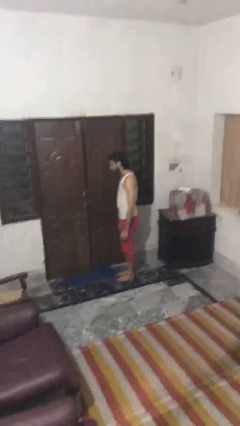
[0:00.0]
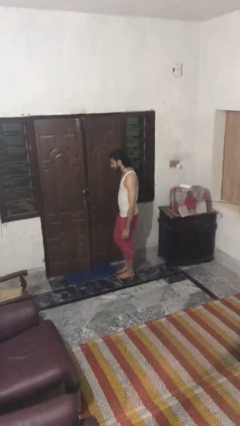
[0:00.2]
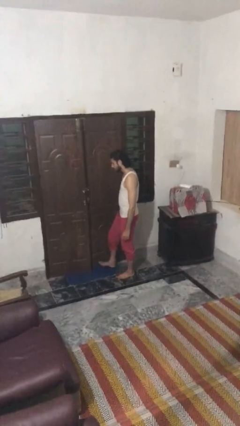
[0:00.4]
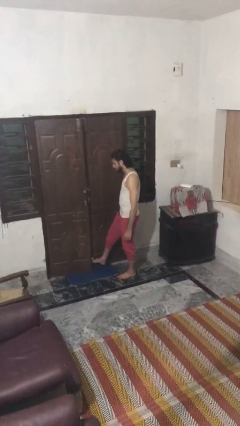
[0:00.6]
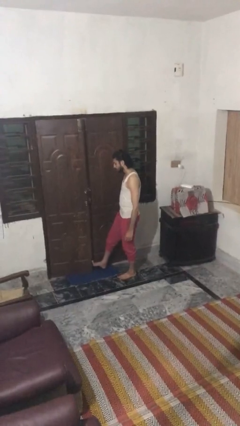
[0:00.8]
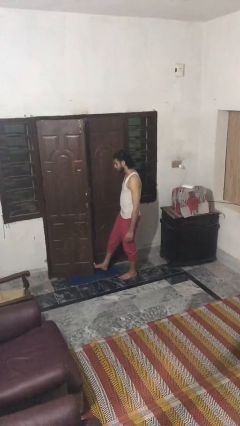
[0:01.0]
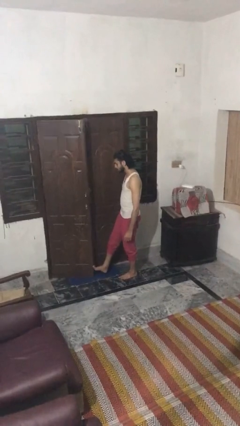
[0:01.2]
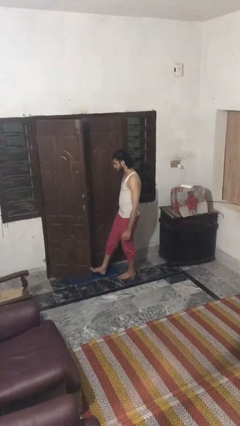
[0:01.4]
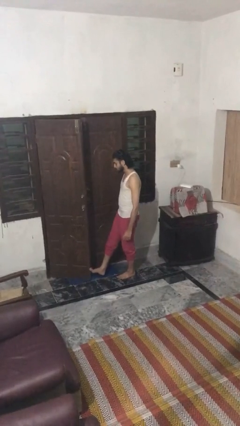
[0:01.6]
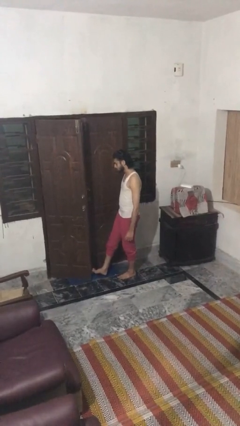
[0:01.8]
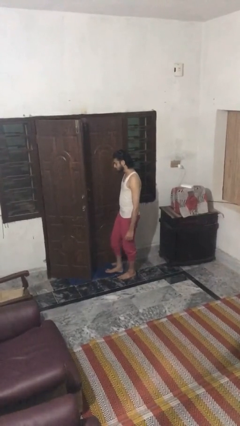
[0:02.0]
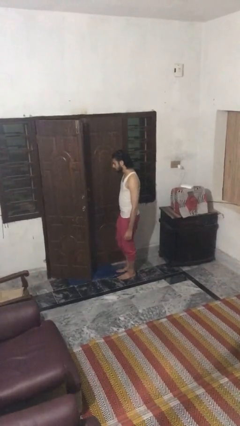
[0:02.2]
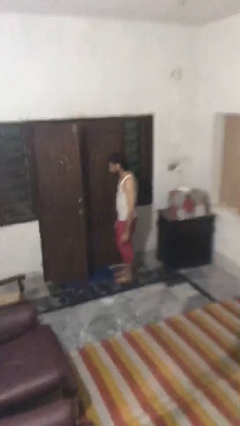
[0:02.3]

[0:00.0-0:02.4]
person opens facility door

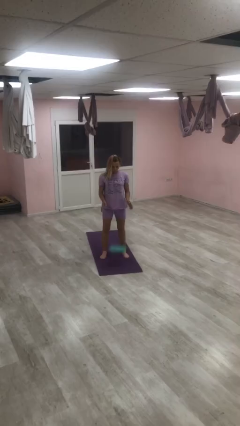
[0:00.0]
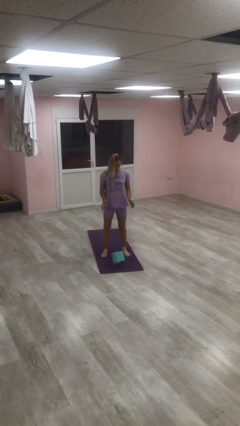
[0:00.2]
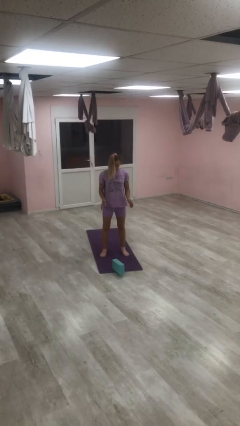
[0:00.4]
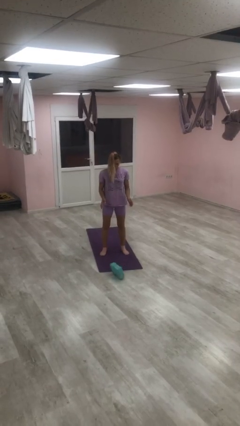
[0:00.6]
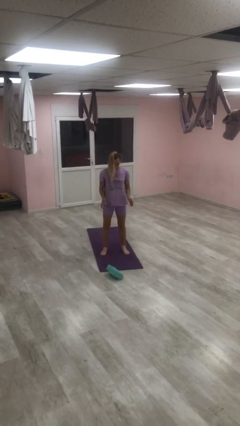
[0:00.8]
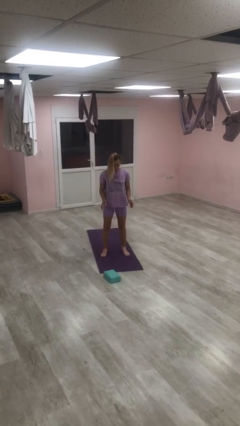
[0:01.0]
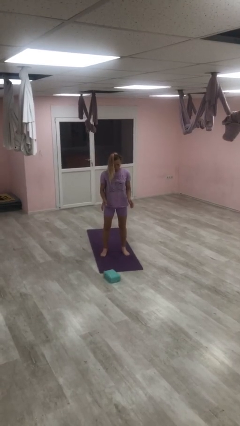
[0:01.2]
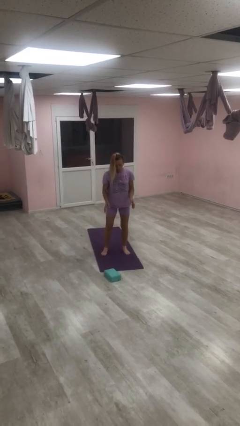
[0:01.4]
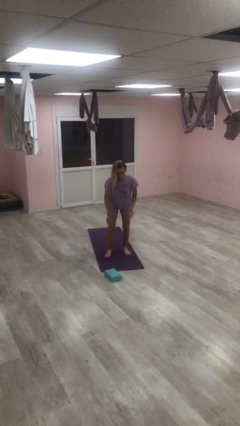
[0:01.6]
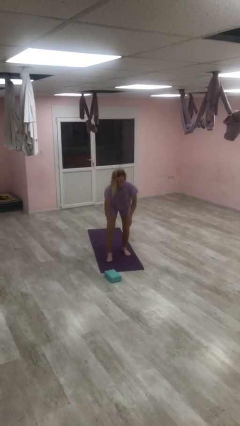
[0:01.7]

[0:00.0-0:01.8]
person drops object

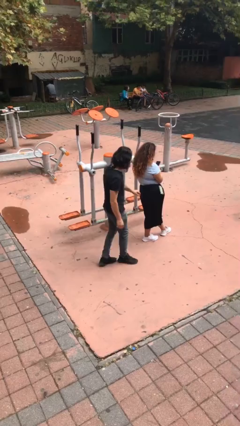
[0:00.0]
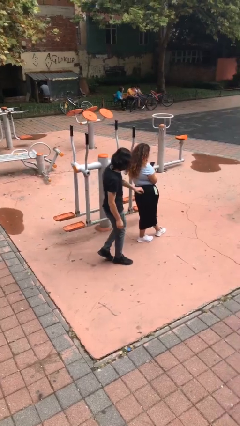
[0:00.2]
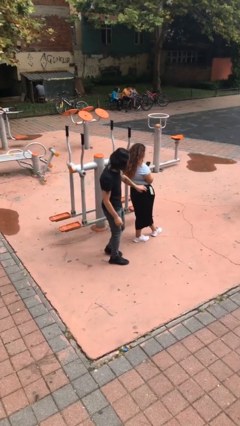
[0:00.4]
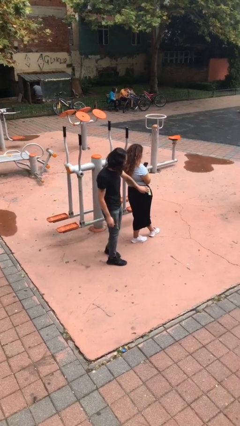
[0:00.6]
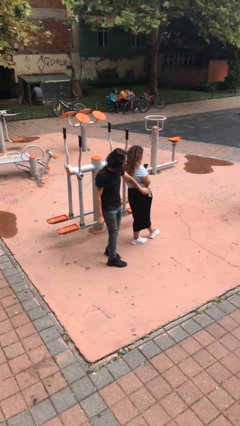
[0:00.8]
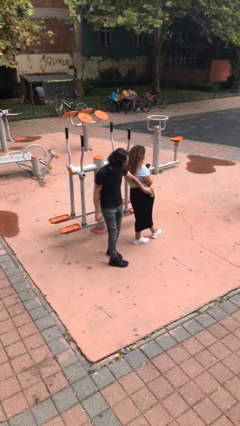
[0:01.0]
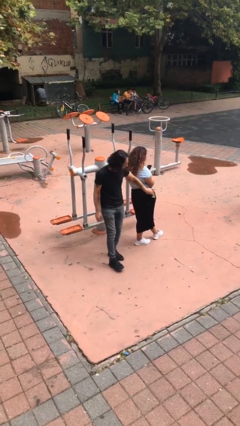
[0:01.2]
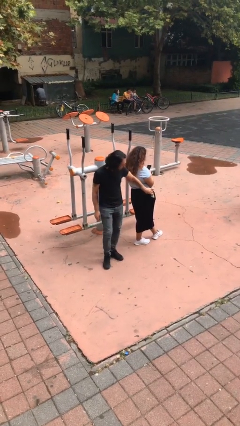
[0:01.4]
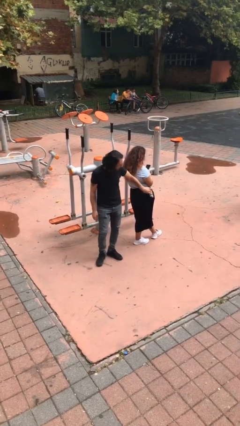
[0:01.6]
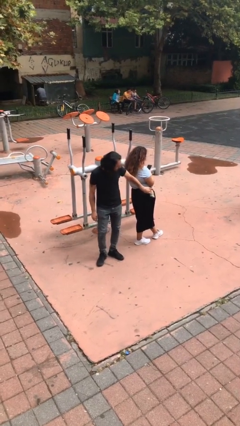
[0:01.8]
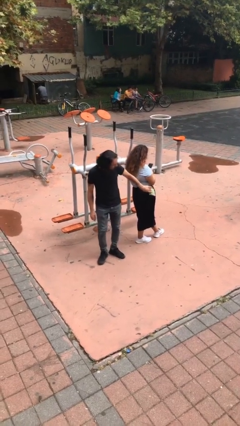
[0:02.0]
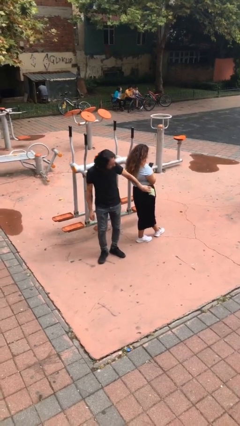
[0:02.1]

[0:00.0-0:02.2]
person steals object from person

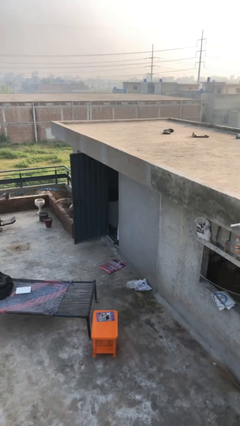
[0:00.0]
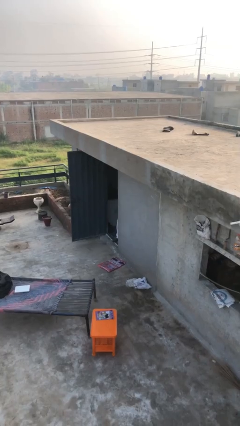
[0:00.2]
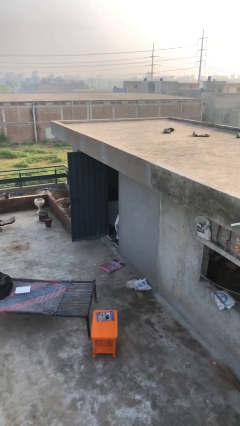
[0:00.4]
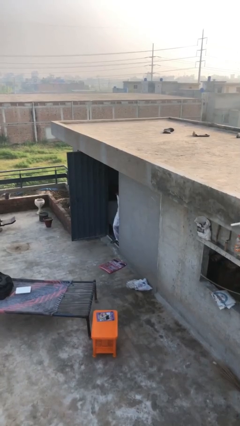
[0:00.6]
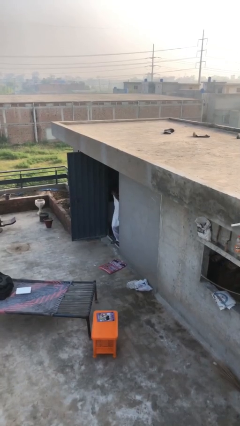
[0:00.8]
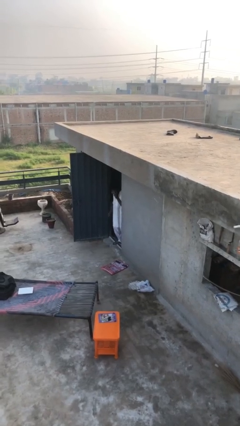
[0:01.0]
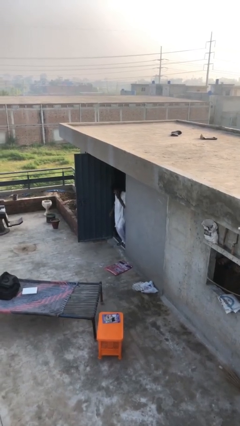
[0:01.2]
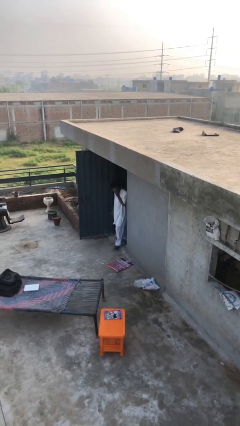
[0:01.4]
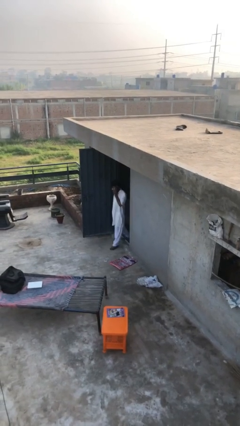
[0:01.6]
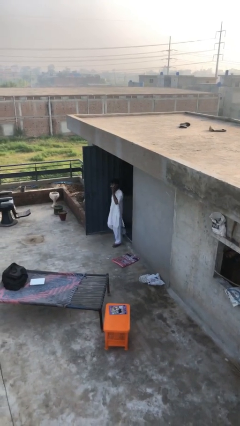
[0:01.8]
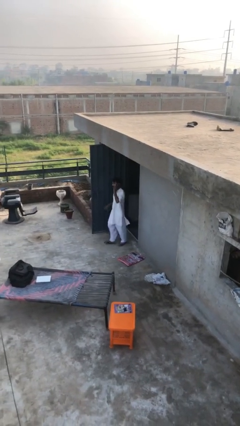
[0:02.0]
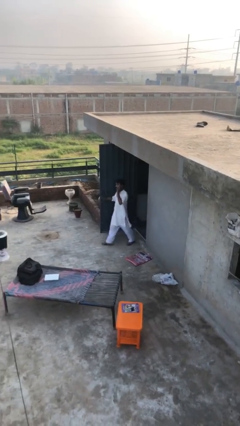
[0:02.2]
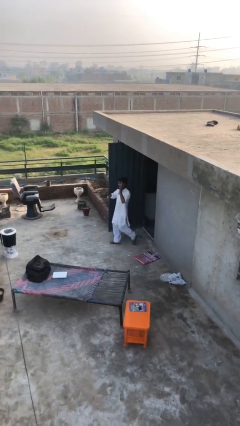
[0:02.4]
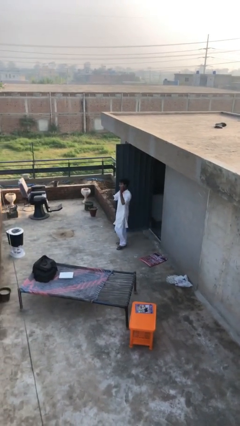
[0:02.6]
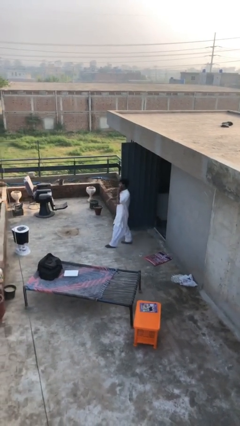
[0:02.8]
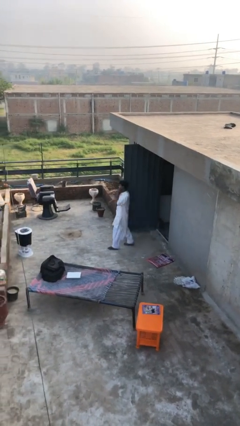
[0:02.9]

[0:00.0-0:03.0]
person enters scene through structure

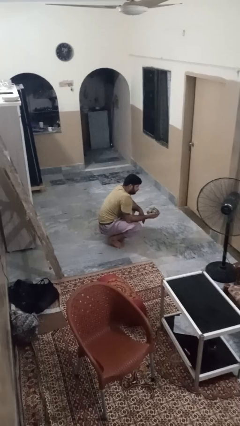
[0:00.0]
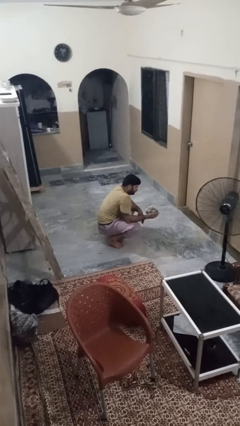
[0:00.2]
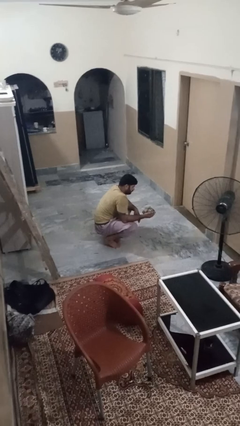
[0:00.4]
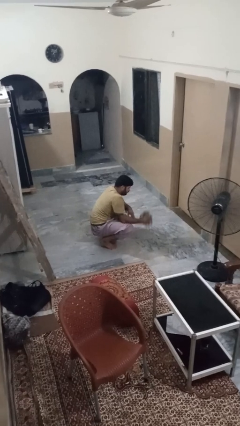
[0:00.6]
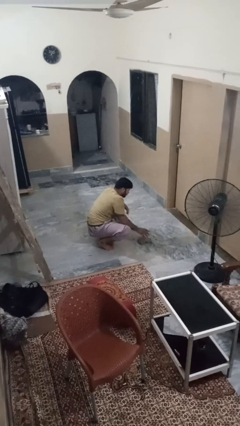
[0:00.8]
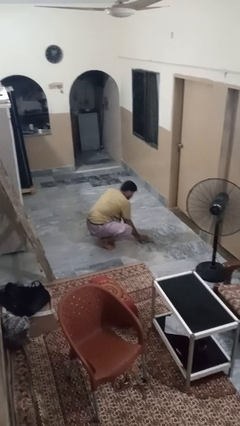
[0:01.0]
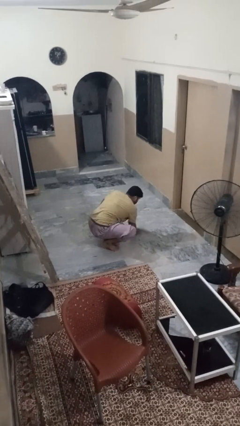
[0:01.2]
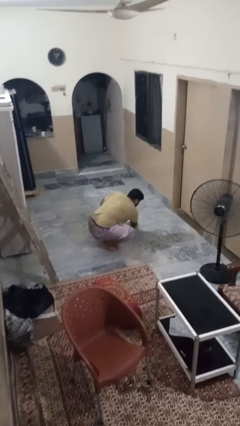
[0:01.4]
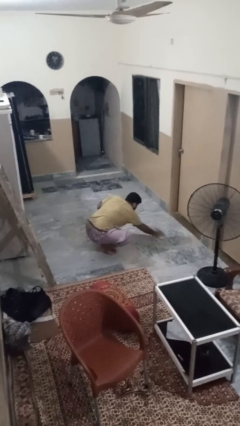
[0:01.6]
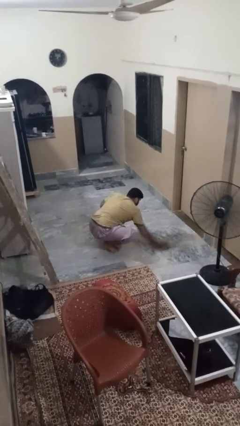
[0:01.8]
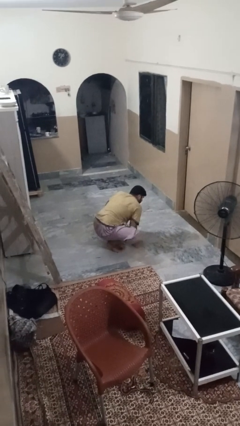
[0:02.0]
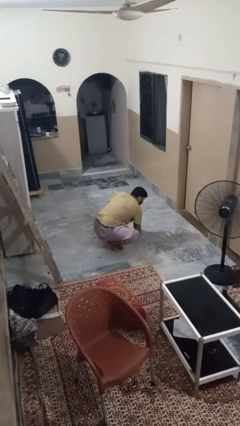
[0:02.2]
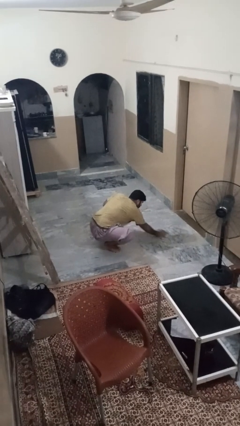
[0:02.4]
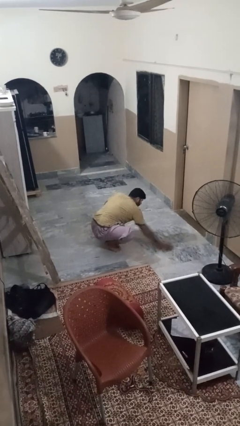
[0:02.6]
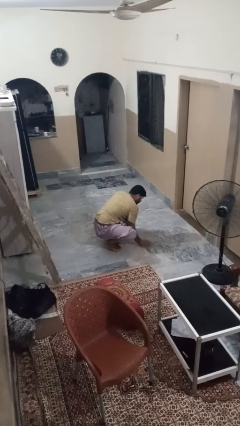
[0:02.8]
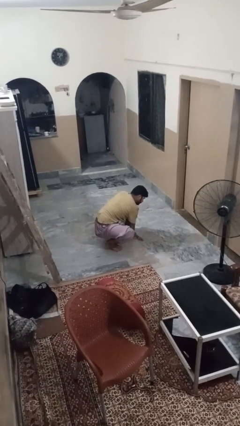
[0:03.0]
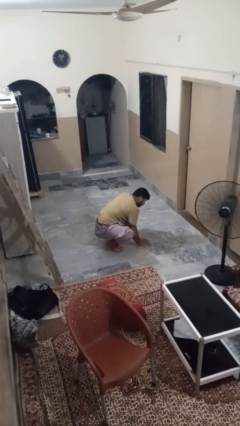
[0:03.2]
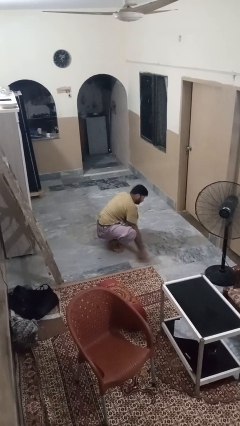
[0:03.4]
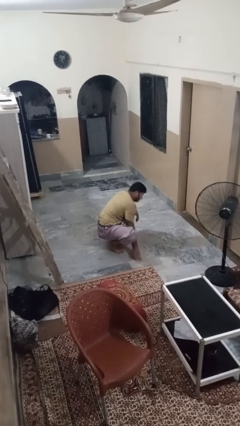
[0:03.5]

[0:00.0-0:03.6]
person mops

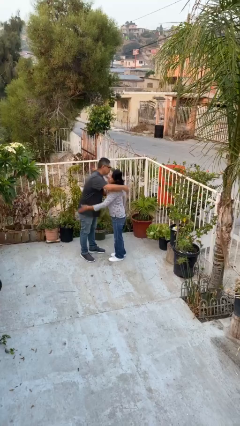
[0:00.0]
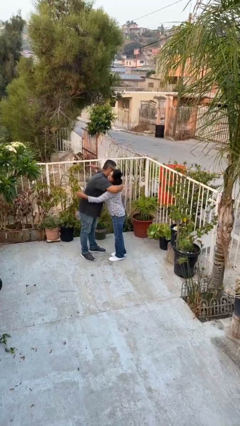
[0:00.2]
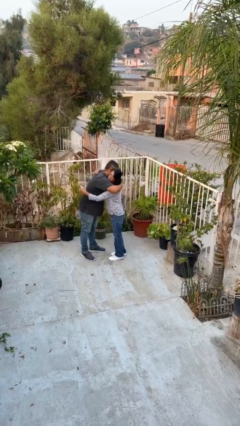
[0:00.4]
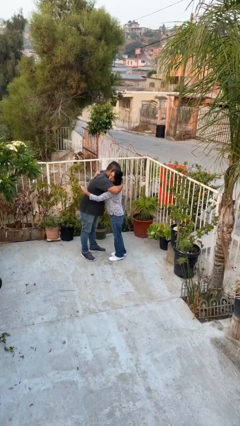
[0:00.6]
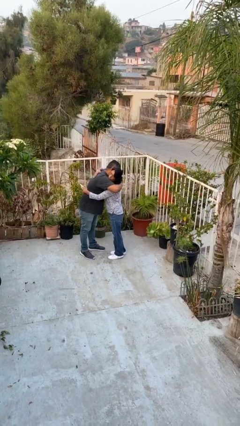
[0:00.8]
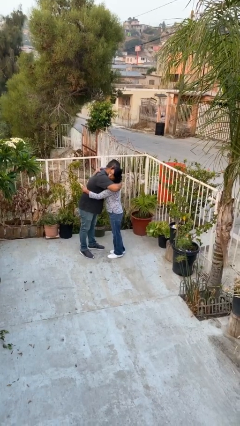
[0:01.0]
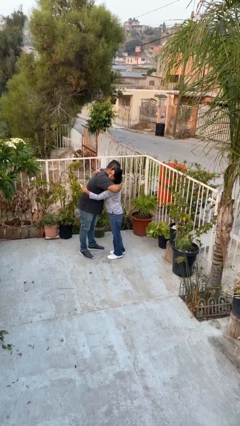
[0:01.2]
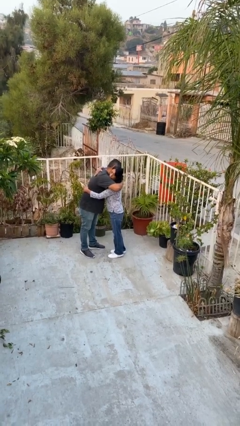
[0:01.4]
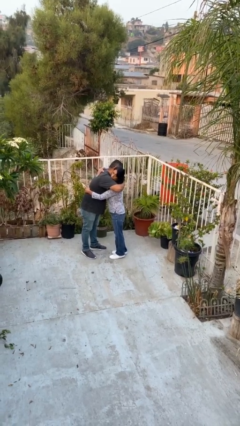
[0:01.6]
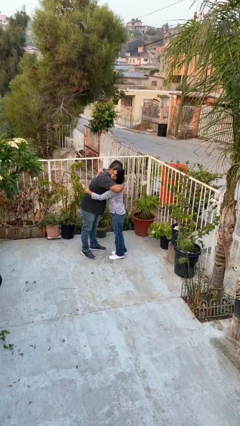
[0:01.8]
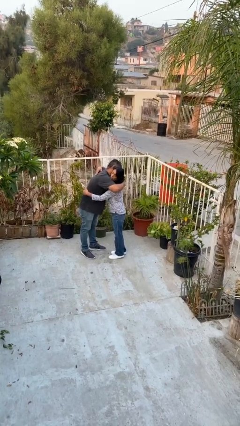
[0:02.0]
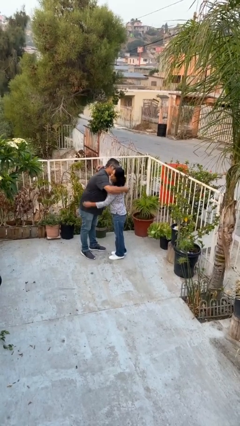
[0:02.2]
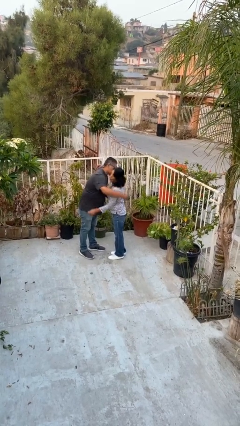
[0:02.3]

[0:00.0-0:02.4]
person embraces person

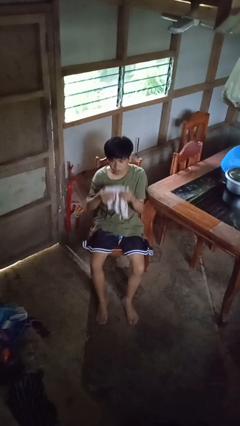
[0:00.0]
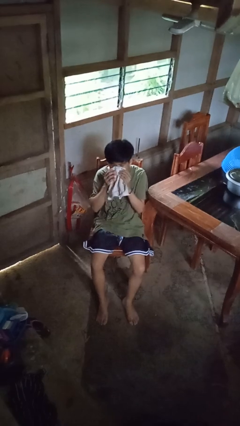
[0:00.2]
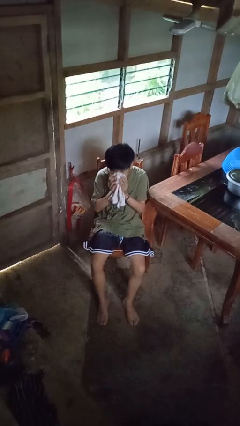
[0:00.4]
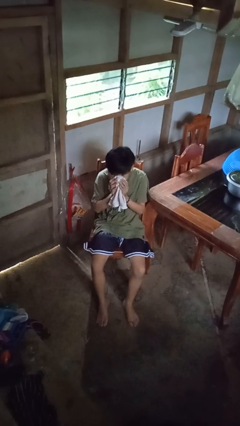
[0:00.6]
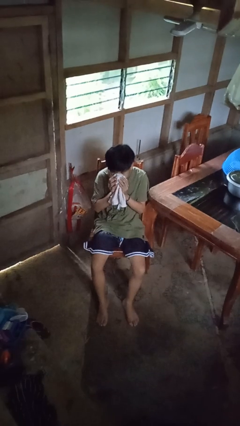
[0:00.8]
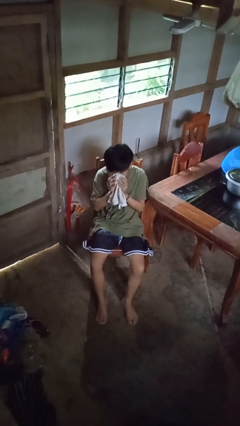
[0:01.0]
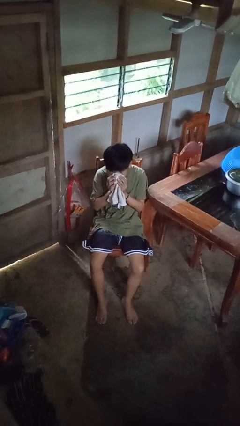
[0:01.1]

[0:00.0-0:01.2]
person blows nose

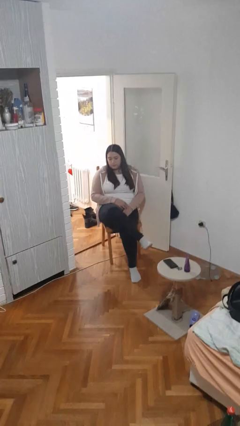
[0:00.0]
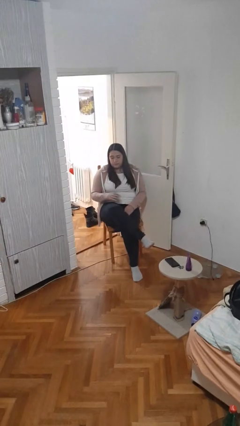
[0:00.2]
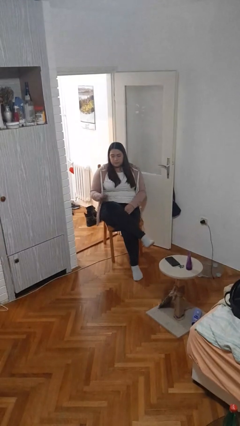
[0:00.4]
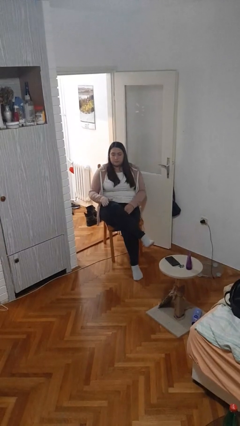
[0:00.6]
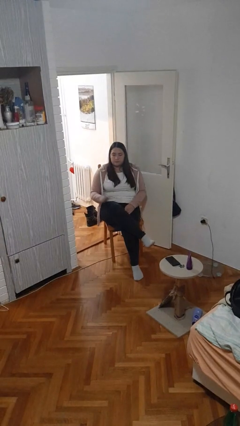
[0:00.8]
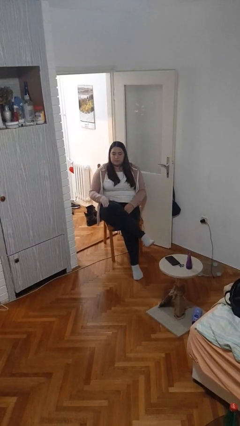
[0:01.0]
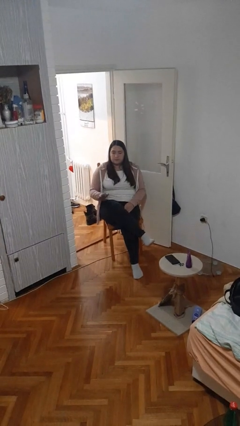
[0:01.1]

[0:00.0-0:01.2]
person slaps hands on thighs
